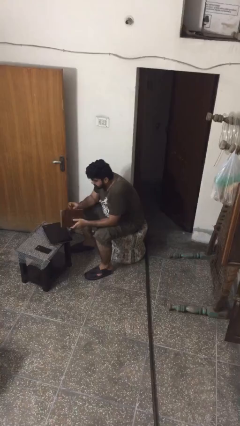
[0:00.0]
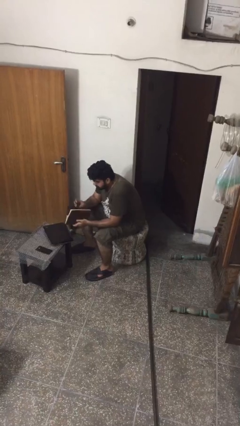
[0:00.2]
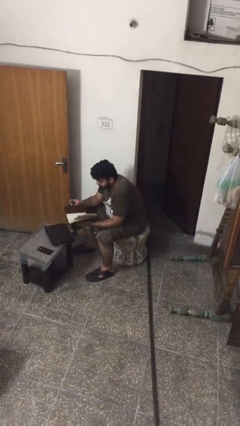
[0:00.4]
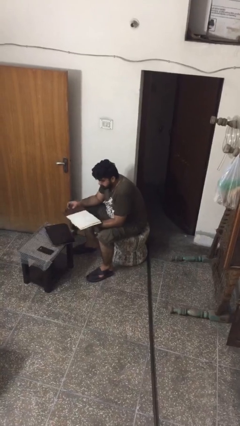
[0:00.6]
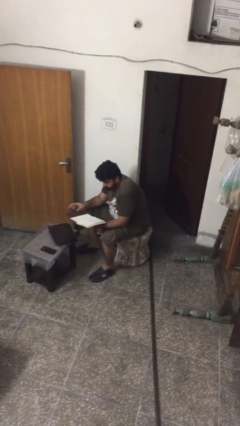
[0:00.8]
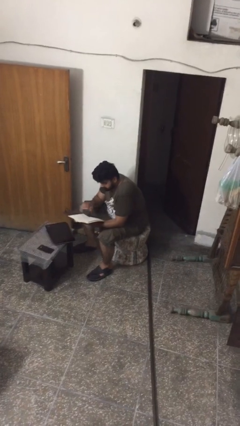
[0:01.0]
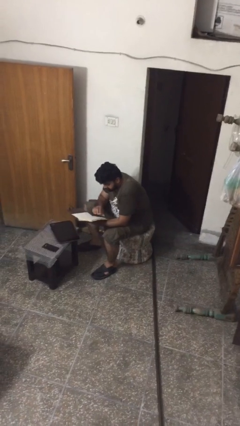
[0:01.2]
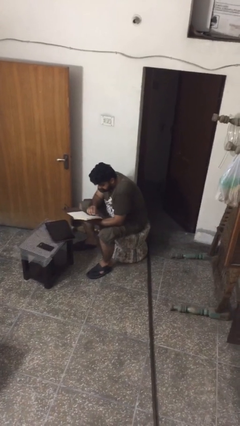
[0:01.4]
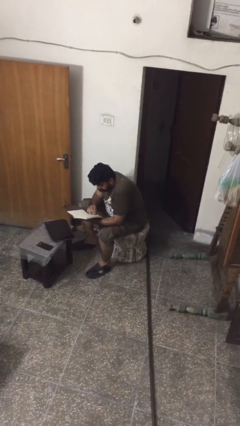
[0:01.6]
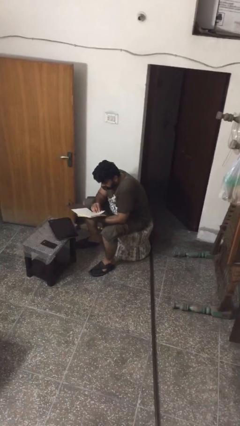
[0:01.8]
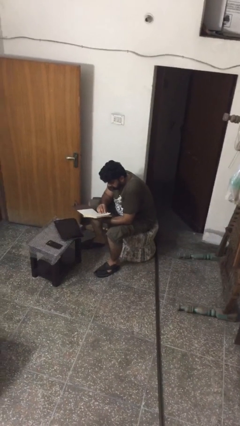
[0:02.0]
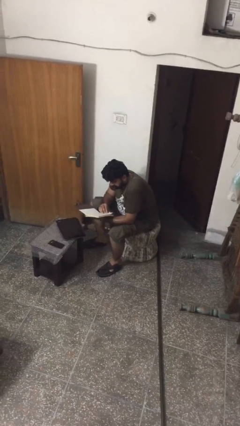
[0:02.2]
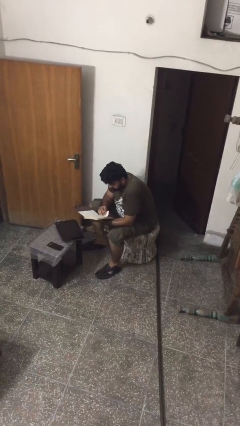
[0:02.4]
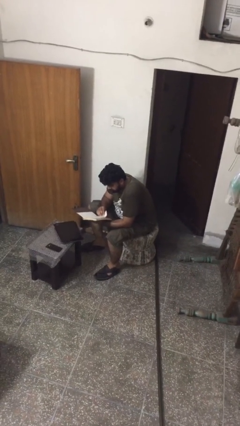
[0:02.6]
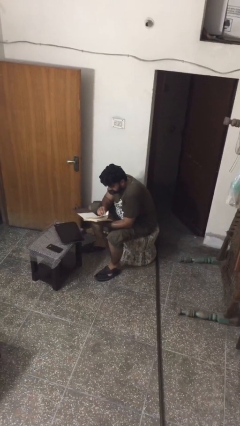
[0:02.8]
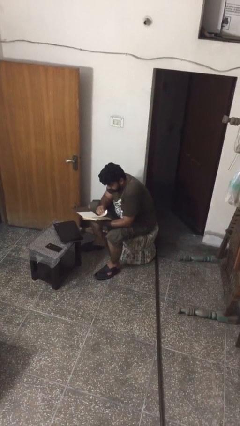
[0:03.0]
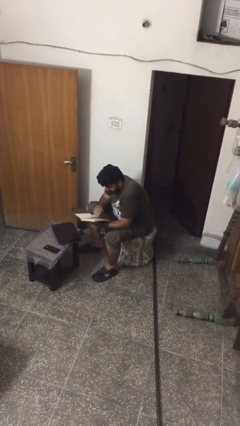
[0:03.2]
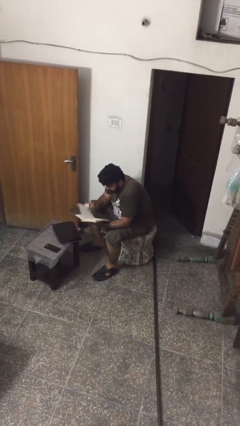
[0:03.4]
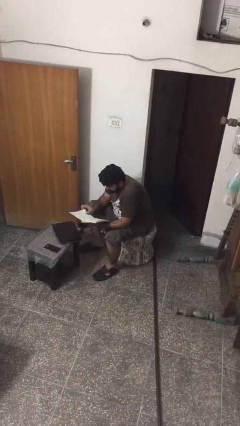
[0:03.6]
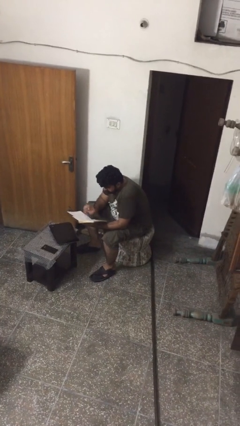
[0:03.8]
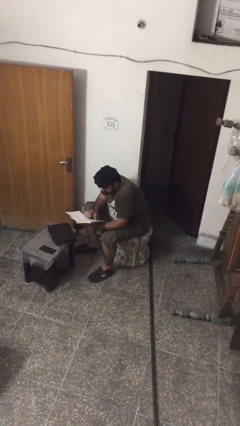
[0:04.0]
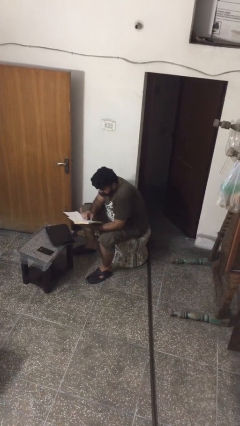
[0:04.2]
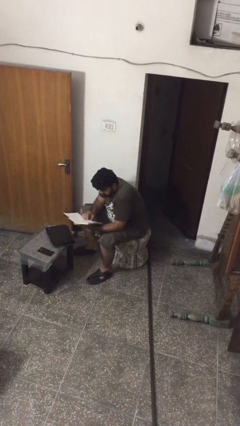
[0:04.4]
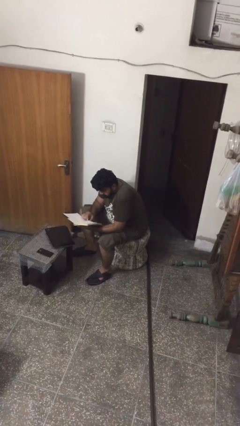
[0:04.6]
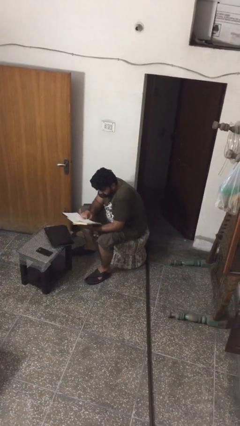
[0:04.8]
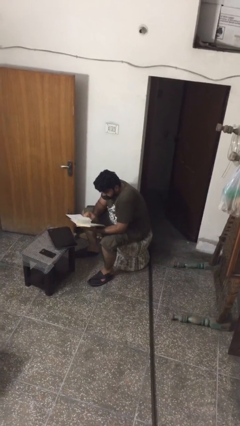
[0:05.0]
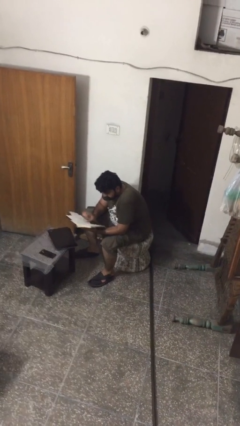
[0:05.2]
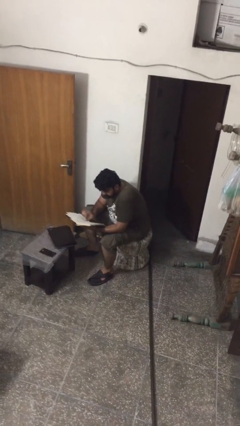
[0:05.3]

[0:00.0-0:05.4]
person reads document

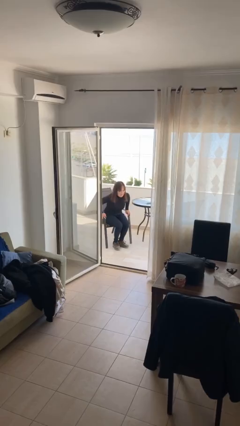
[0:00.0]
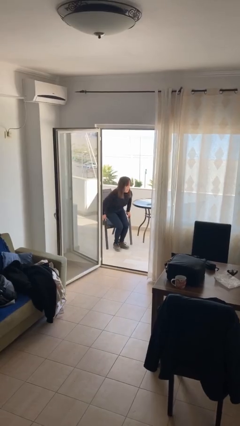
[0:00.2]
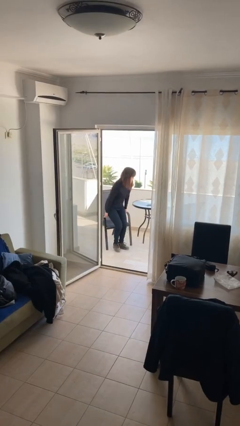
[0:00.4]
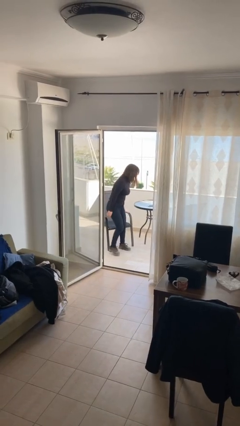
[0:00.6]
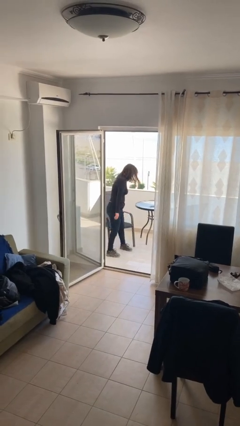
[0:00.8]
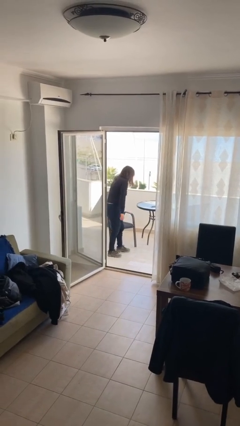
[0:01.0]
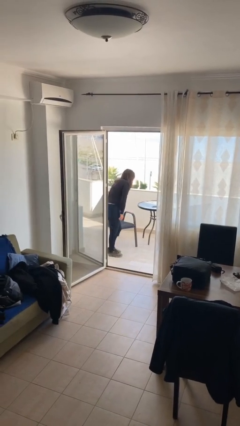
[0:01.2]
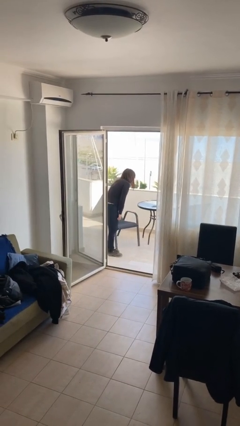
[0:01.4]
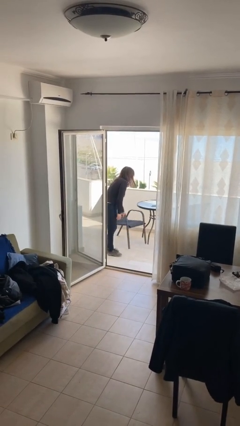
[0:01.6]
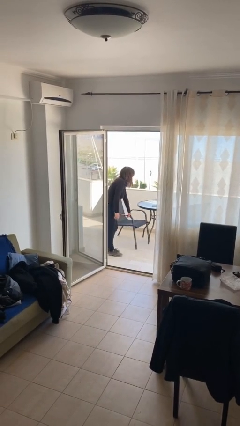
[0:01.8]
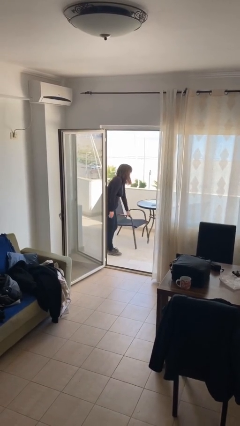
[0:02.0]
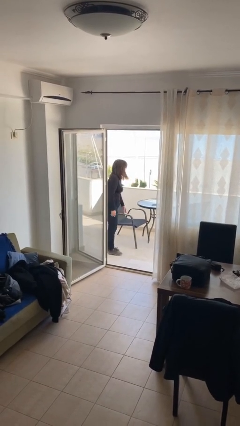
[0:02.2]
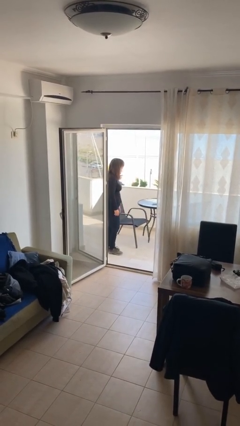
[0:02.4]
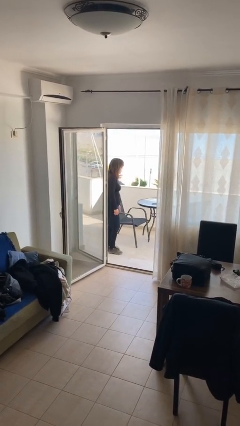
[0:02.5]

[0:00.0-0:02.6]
person stands up

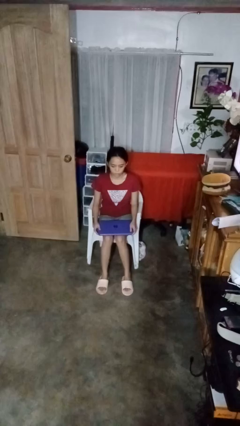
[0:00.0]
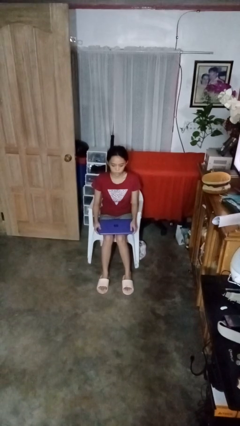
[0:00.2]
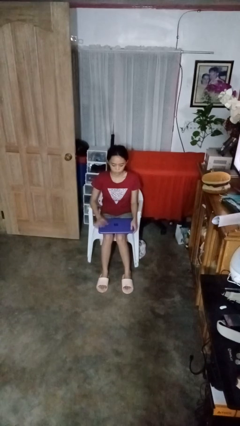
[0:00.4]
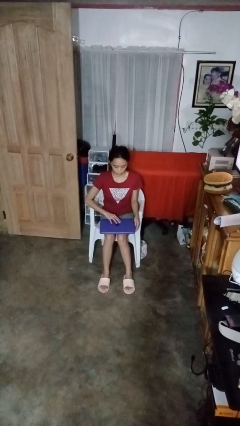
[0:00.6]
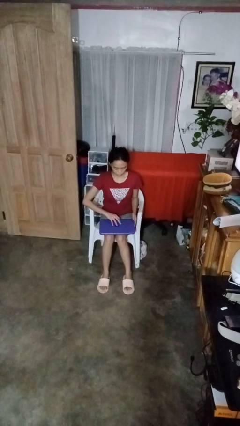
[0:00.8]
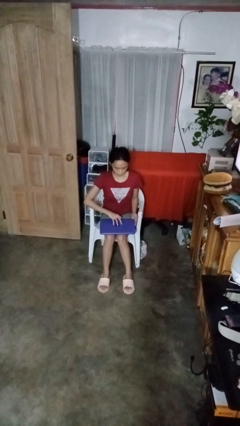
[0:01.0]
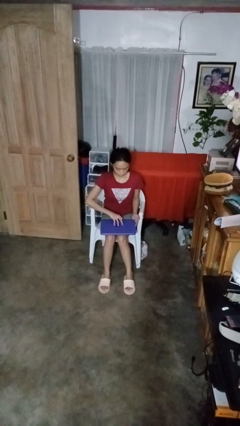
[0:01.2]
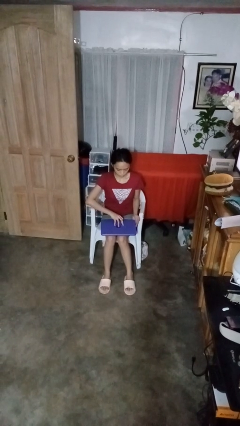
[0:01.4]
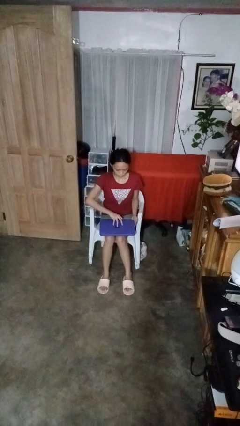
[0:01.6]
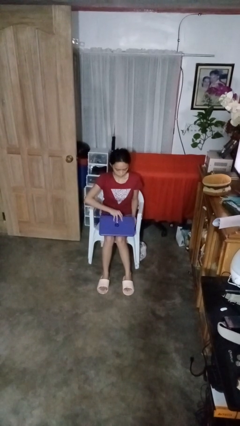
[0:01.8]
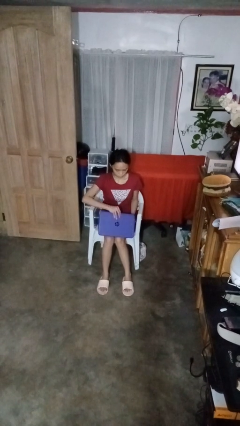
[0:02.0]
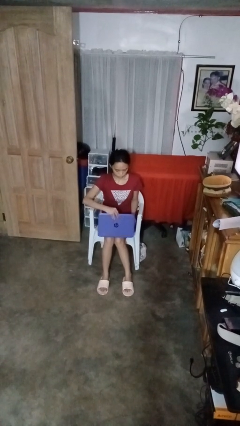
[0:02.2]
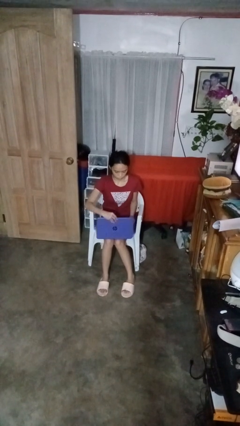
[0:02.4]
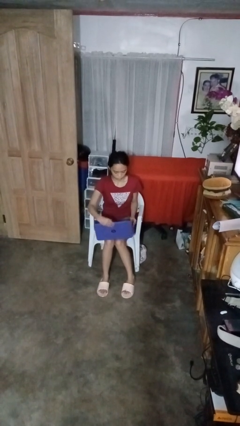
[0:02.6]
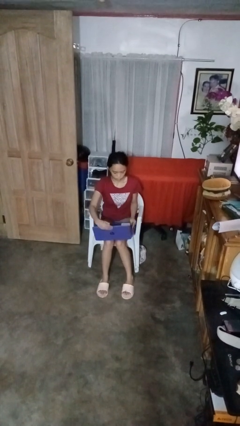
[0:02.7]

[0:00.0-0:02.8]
person opens laptop

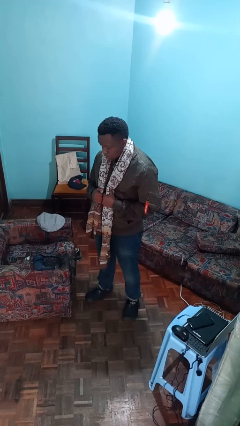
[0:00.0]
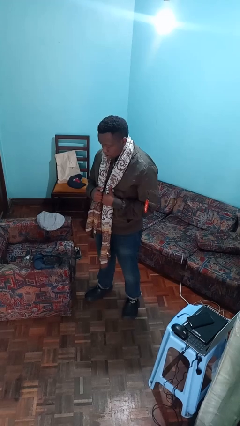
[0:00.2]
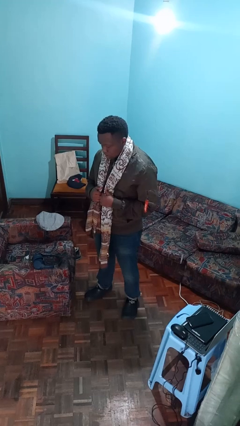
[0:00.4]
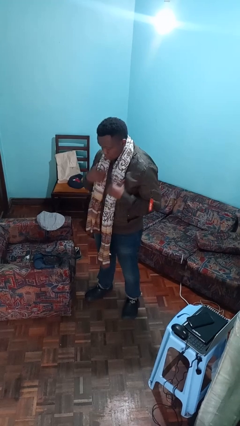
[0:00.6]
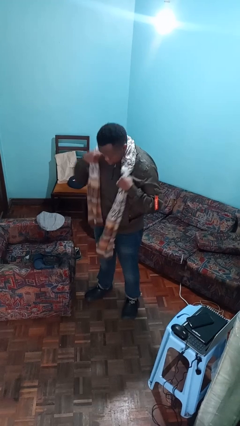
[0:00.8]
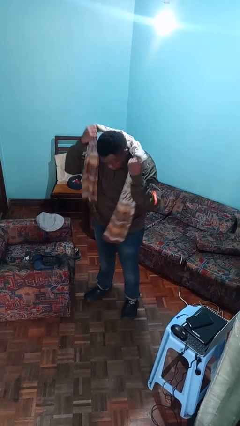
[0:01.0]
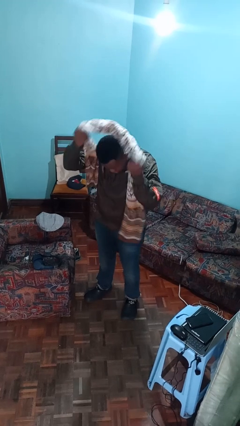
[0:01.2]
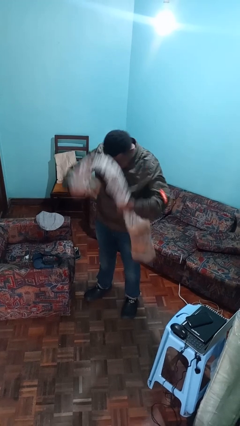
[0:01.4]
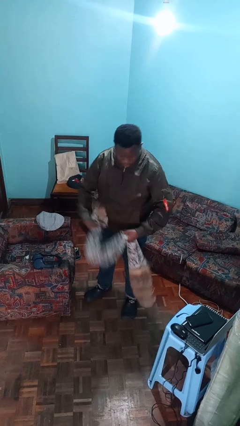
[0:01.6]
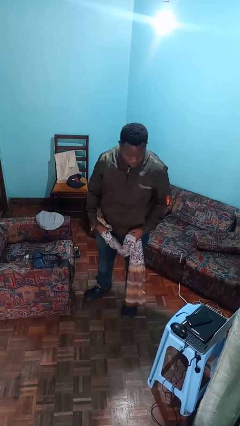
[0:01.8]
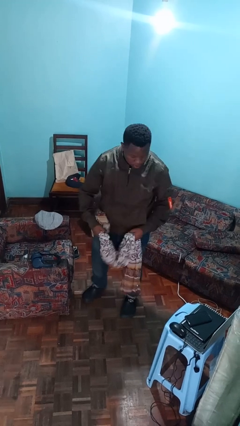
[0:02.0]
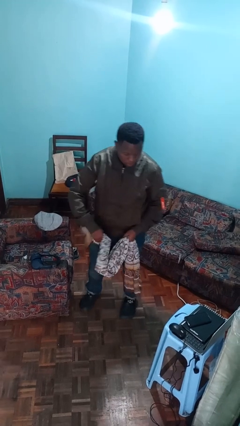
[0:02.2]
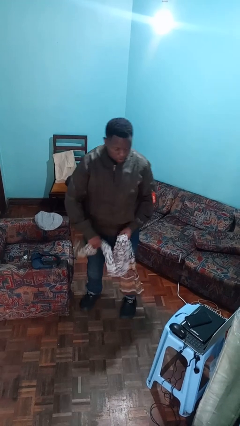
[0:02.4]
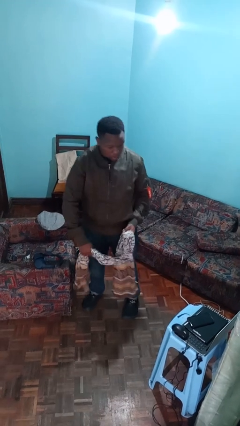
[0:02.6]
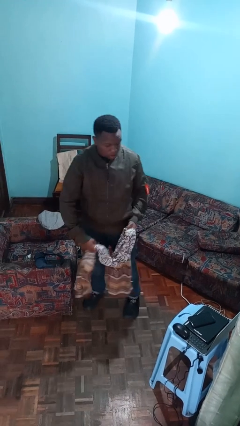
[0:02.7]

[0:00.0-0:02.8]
person takes off scarf

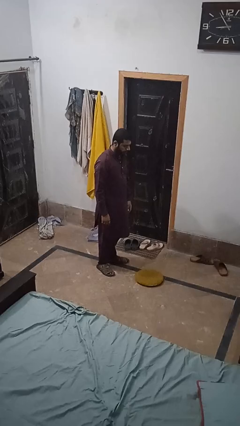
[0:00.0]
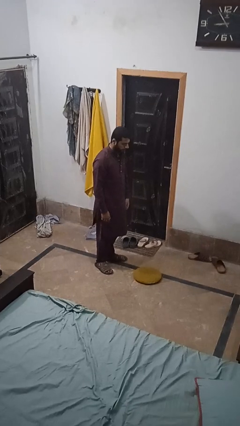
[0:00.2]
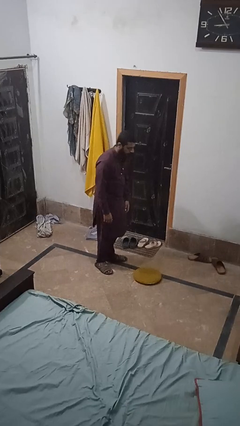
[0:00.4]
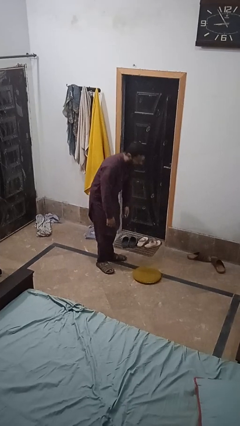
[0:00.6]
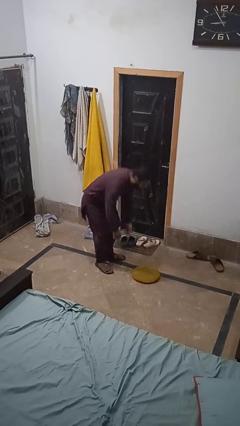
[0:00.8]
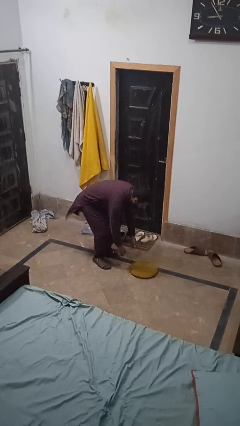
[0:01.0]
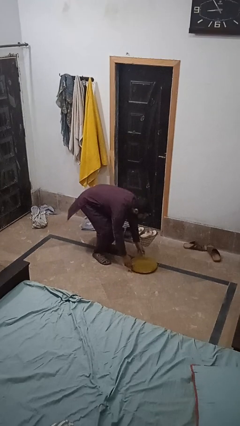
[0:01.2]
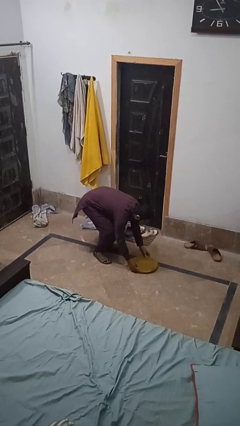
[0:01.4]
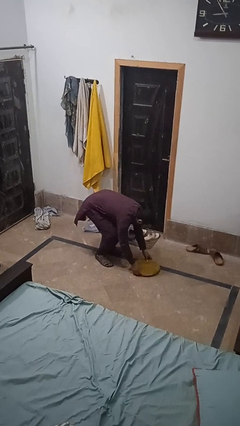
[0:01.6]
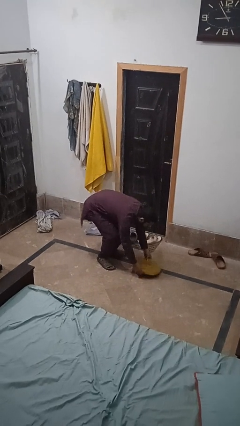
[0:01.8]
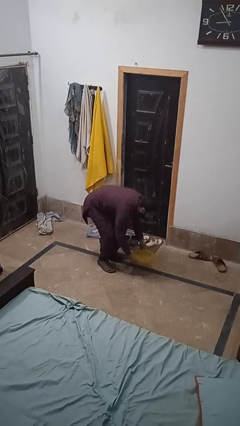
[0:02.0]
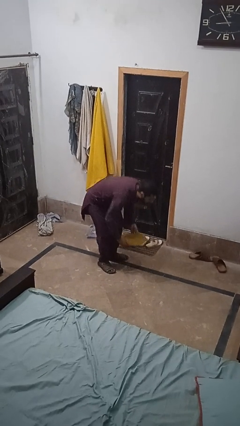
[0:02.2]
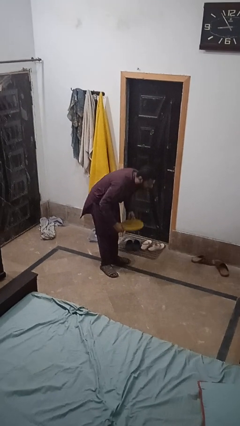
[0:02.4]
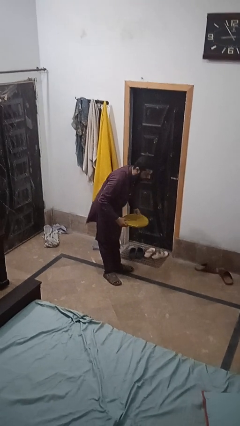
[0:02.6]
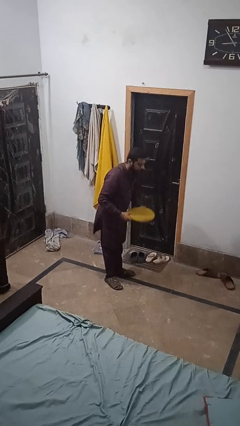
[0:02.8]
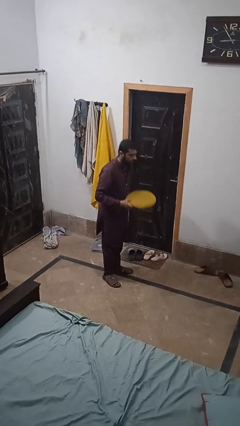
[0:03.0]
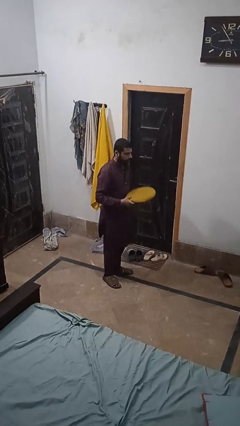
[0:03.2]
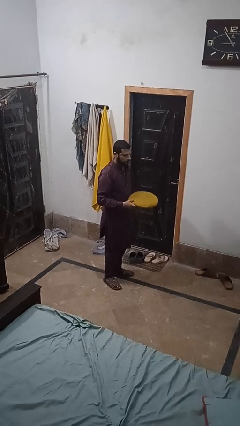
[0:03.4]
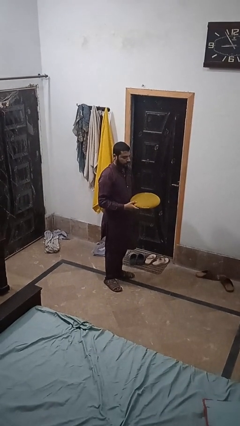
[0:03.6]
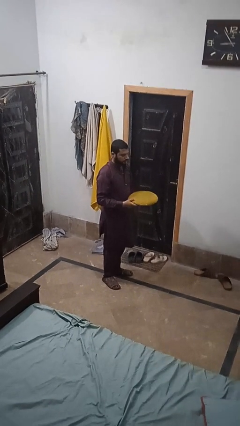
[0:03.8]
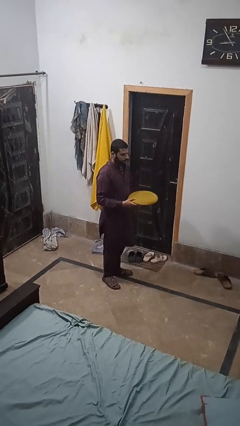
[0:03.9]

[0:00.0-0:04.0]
person picks up object from floor

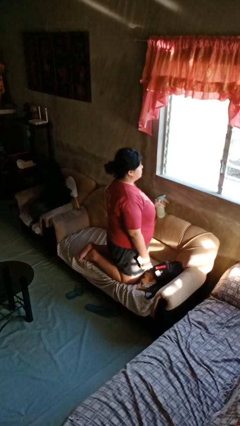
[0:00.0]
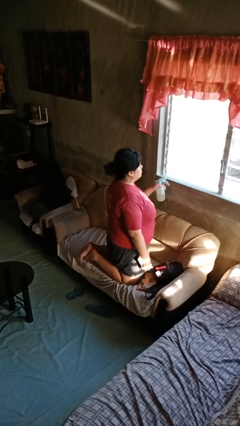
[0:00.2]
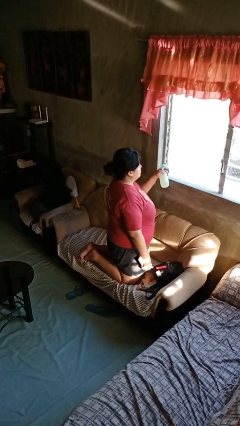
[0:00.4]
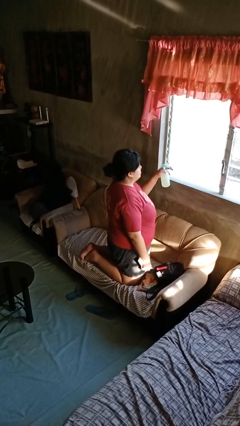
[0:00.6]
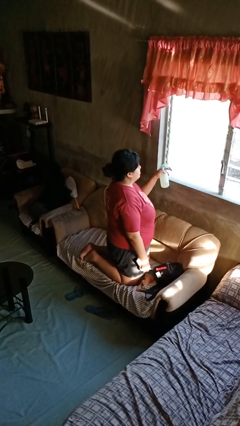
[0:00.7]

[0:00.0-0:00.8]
person sprays from bottle
